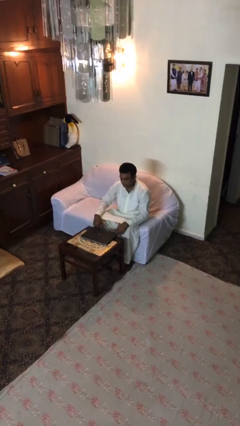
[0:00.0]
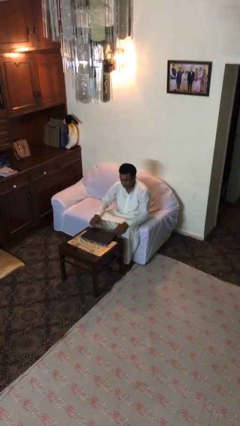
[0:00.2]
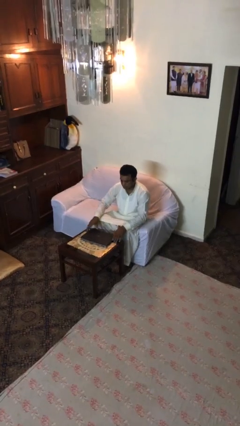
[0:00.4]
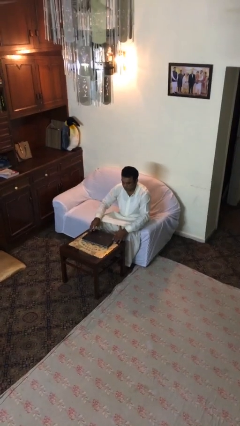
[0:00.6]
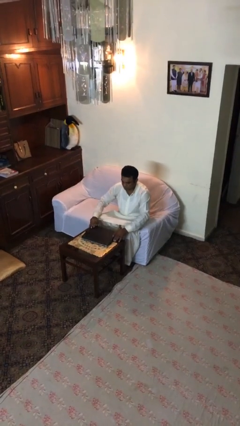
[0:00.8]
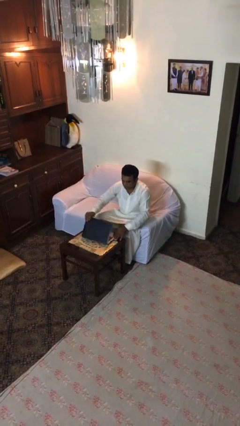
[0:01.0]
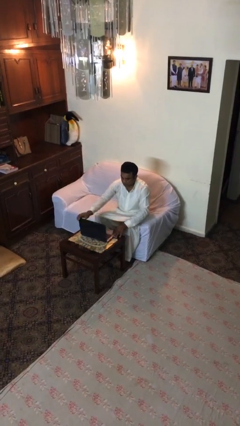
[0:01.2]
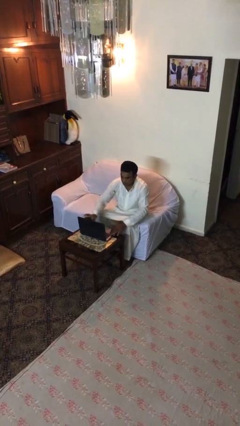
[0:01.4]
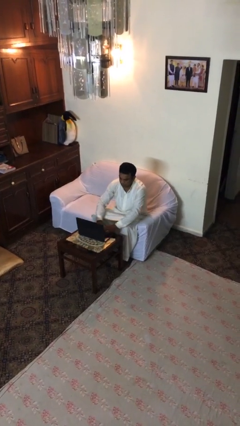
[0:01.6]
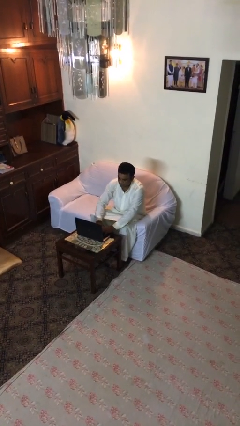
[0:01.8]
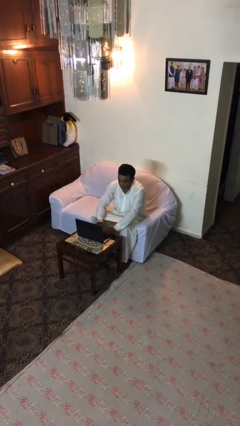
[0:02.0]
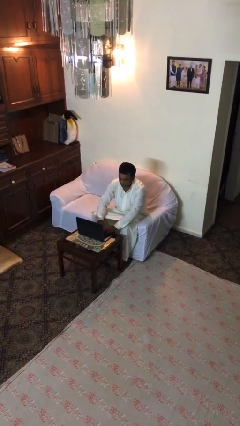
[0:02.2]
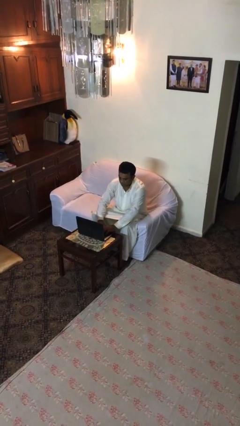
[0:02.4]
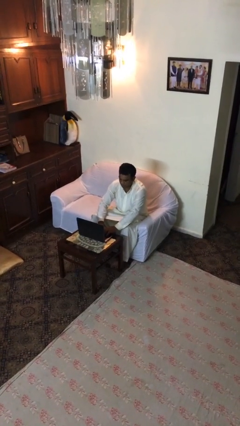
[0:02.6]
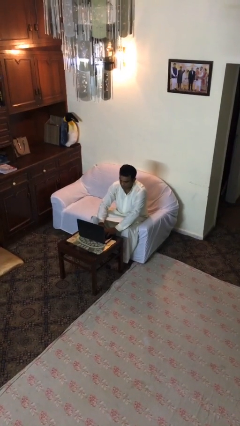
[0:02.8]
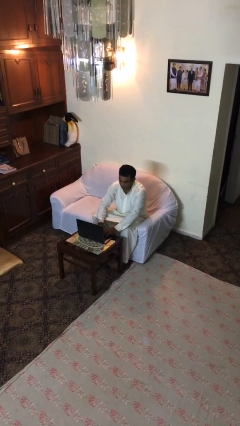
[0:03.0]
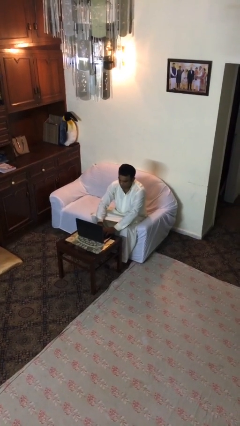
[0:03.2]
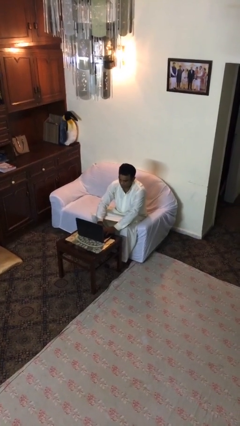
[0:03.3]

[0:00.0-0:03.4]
person interacts with laptop

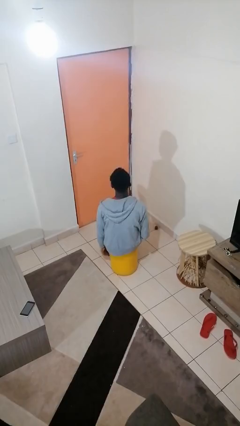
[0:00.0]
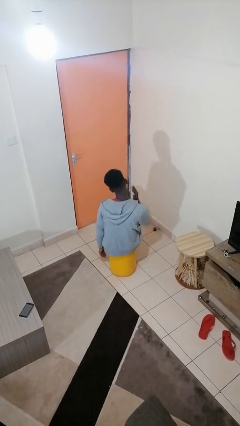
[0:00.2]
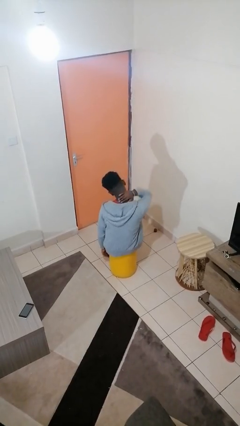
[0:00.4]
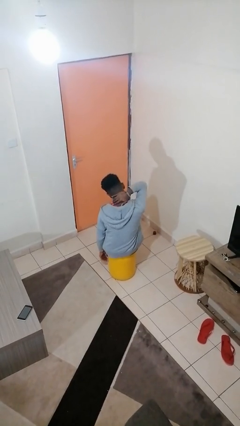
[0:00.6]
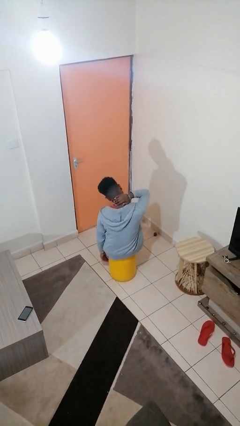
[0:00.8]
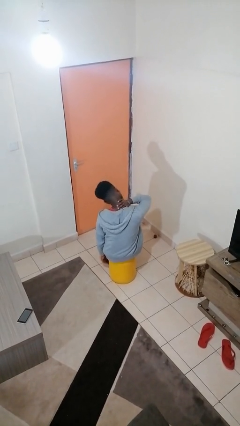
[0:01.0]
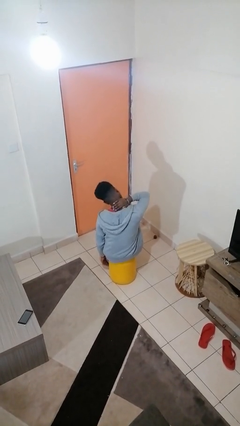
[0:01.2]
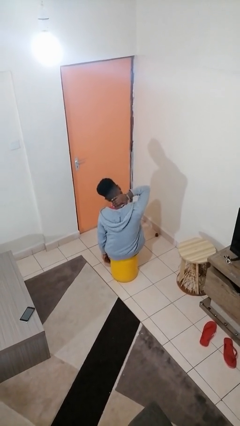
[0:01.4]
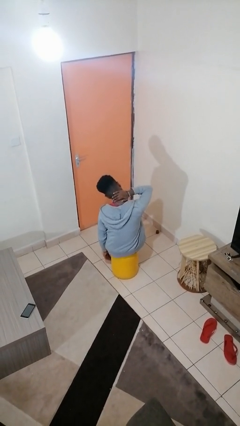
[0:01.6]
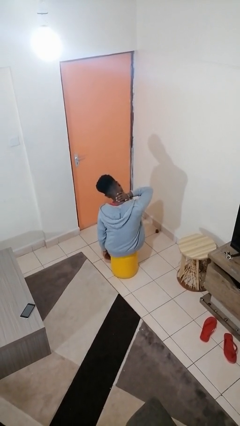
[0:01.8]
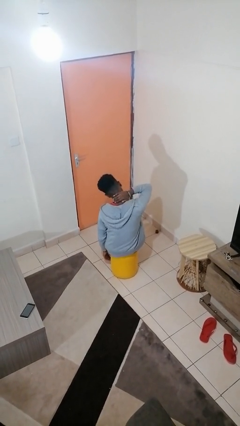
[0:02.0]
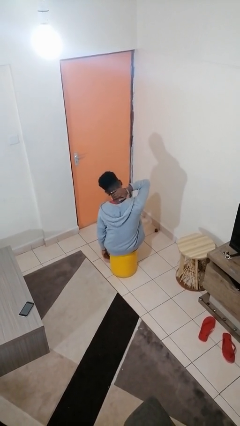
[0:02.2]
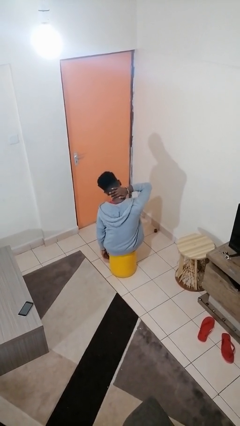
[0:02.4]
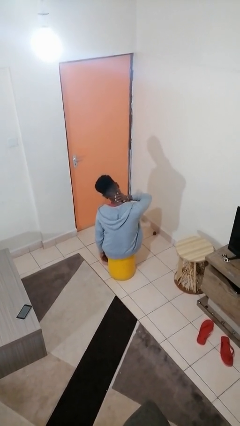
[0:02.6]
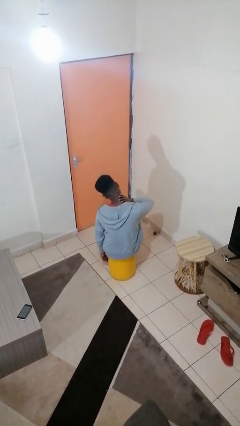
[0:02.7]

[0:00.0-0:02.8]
person rubs neck

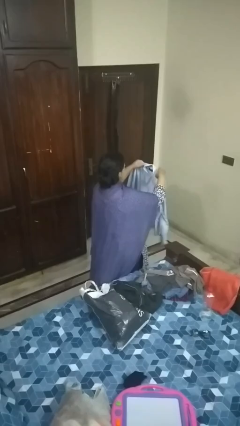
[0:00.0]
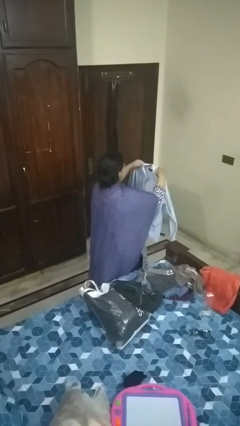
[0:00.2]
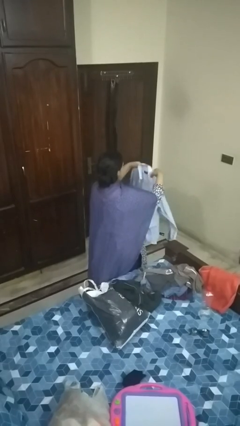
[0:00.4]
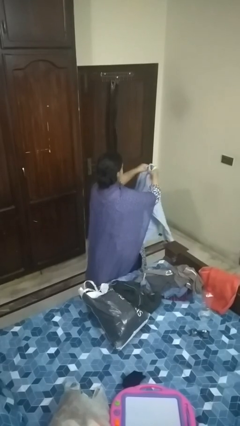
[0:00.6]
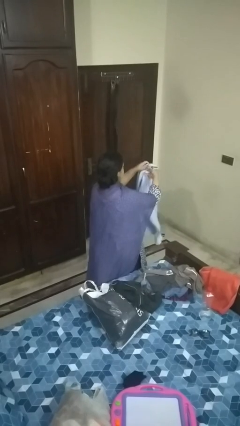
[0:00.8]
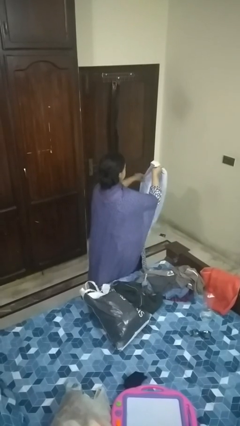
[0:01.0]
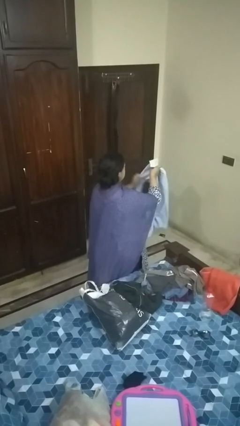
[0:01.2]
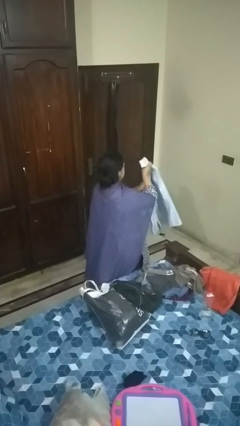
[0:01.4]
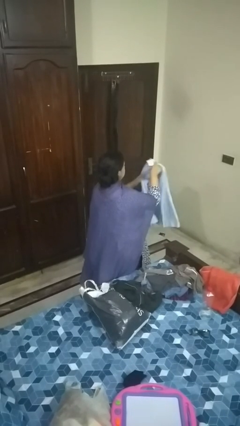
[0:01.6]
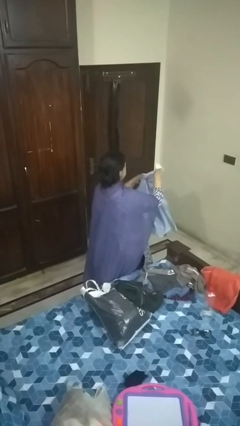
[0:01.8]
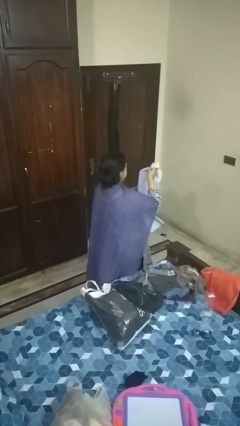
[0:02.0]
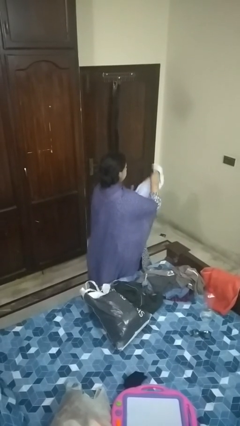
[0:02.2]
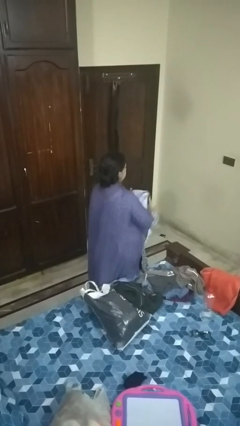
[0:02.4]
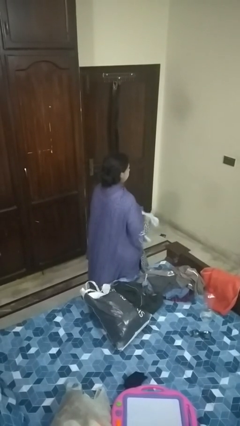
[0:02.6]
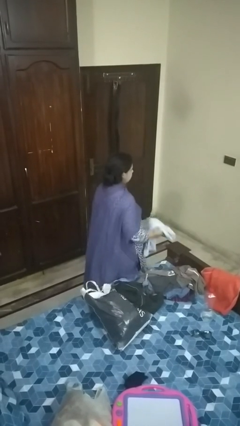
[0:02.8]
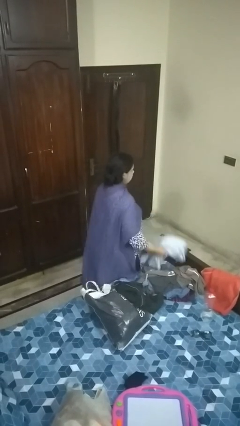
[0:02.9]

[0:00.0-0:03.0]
person folds shirt

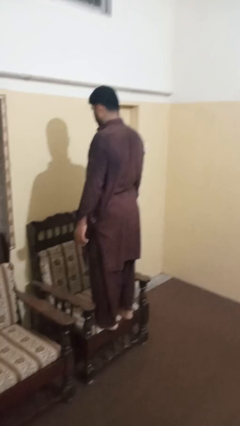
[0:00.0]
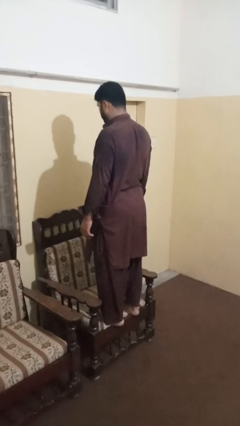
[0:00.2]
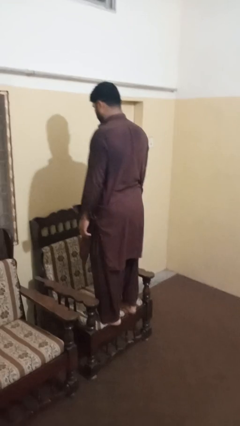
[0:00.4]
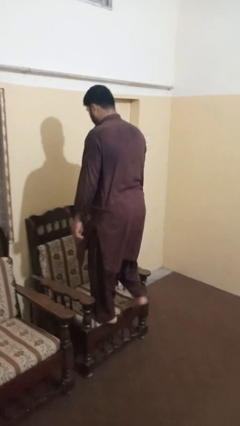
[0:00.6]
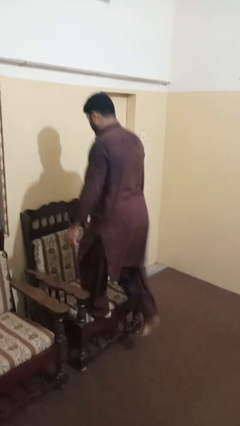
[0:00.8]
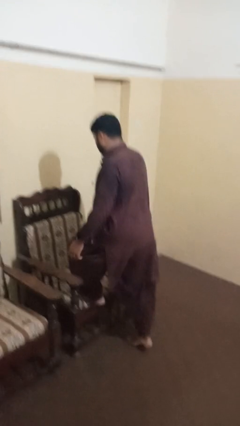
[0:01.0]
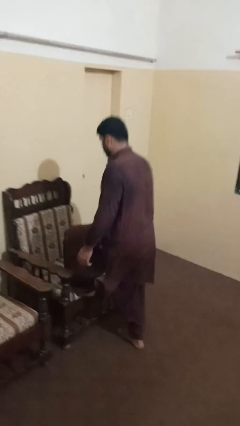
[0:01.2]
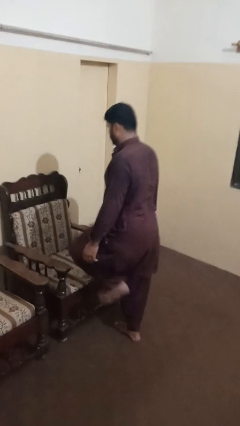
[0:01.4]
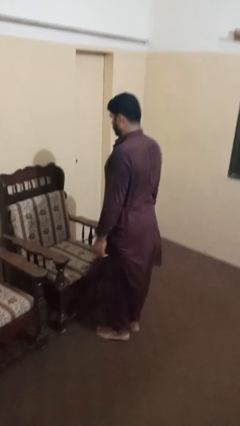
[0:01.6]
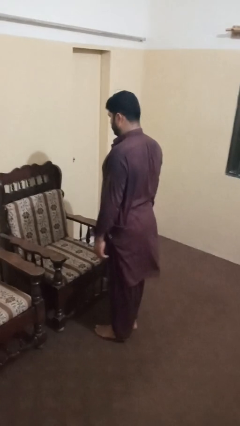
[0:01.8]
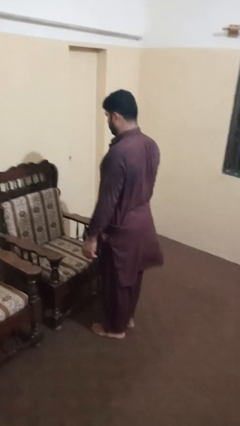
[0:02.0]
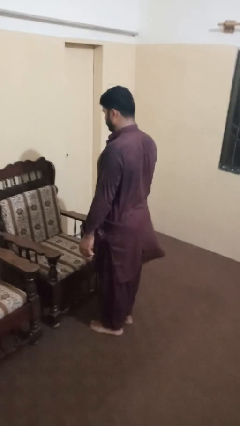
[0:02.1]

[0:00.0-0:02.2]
person climbs off chair

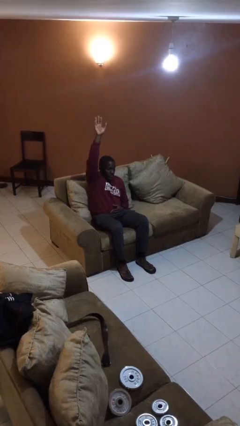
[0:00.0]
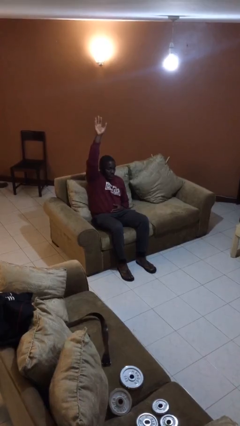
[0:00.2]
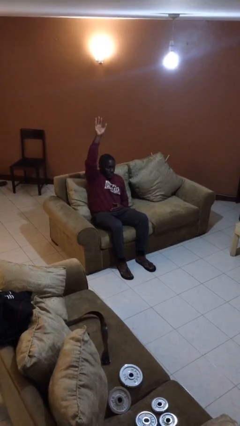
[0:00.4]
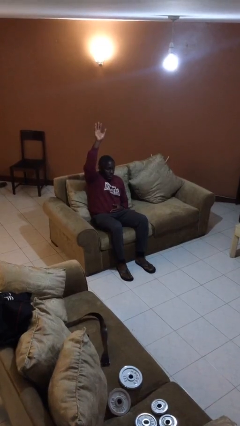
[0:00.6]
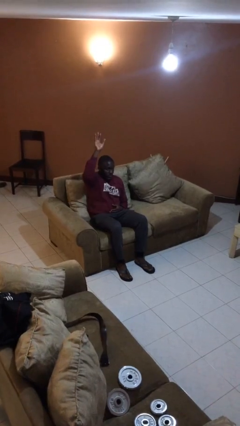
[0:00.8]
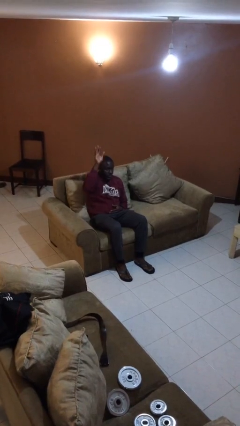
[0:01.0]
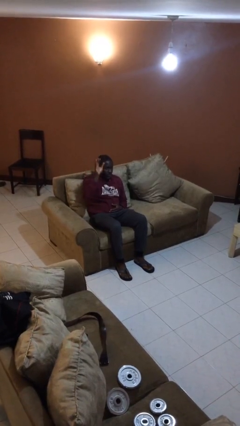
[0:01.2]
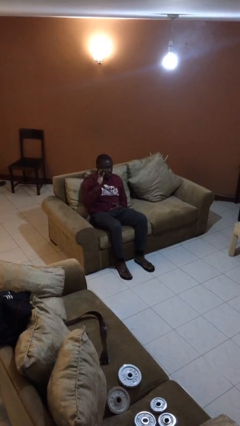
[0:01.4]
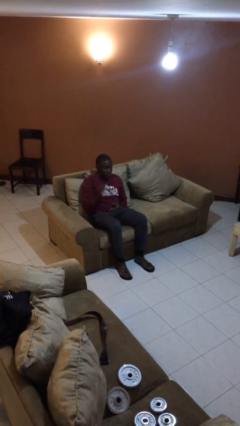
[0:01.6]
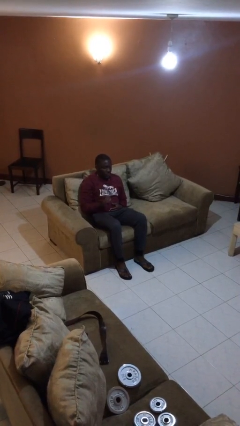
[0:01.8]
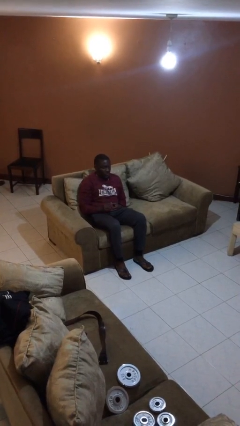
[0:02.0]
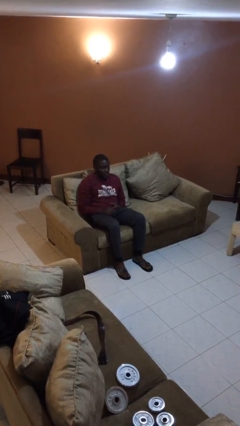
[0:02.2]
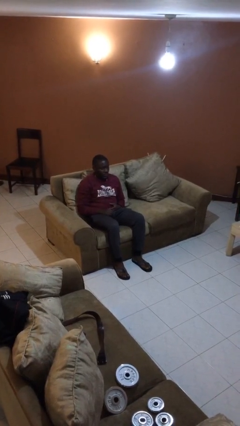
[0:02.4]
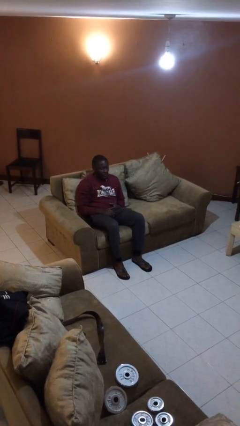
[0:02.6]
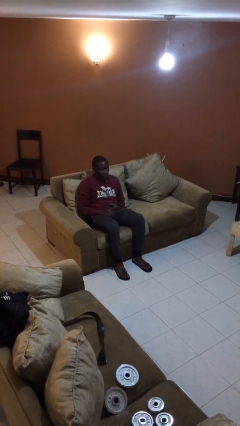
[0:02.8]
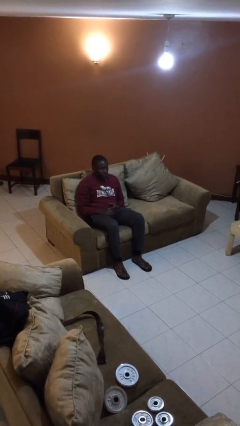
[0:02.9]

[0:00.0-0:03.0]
person gestures lower hand

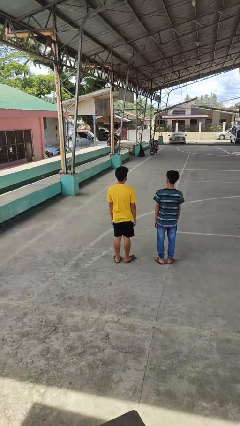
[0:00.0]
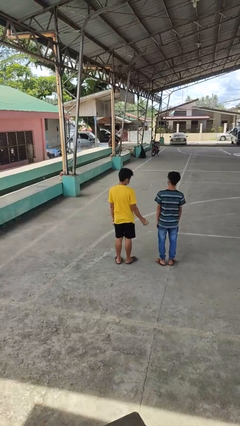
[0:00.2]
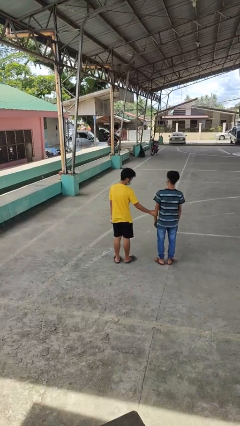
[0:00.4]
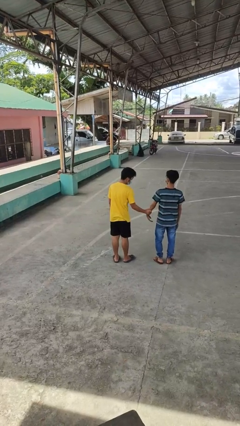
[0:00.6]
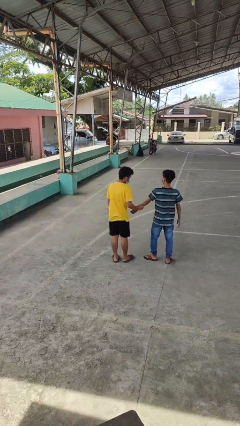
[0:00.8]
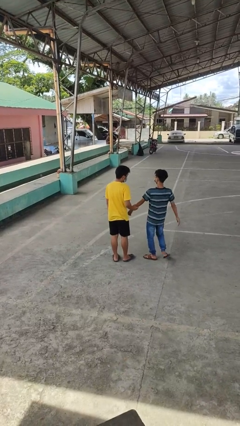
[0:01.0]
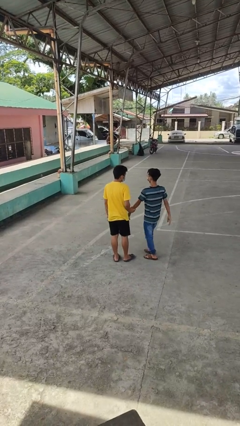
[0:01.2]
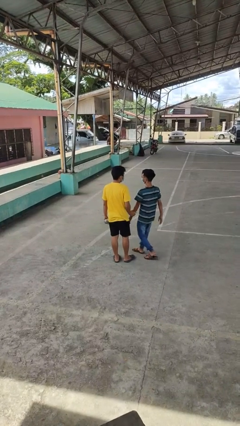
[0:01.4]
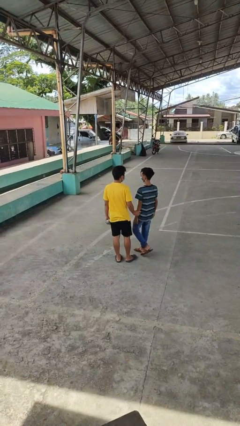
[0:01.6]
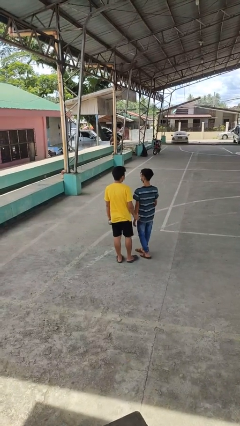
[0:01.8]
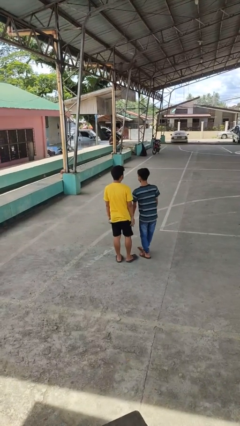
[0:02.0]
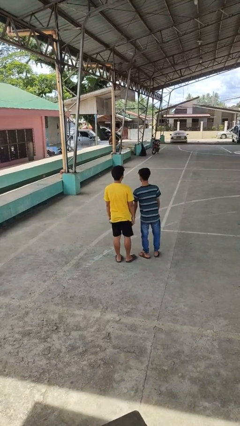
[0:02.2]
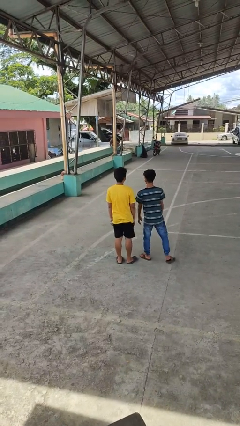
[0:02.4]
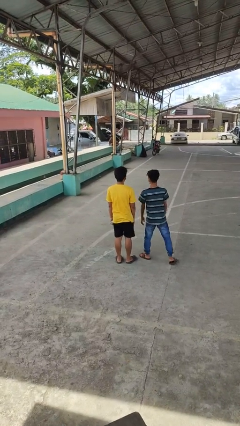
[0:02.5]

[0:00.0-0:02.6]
person grabs person by forearm

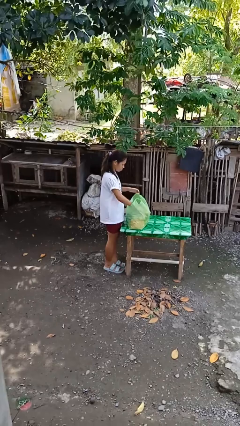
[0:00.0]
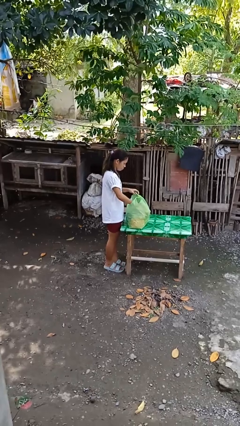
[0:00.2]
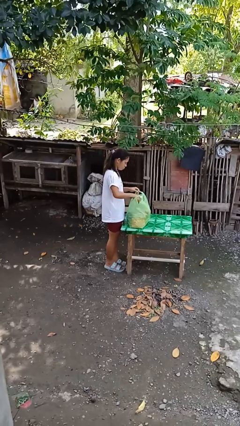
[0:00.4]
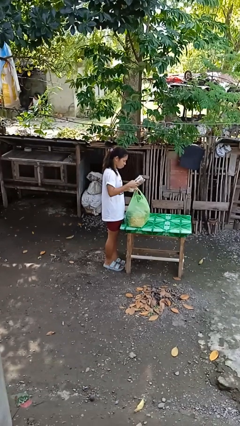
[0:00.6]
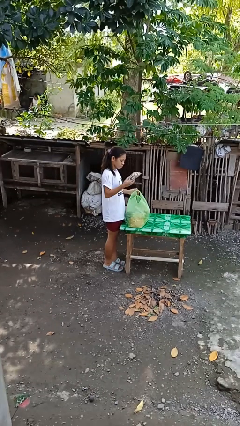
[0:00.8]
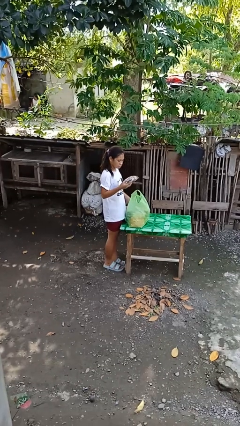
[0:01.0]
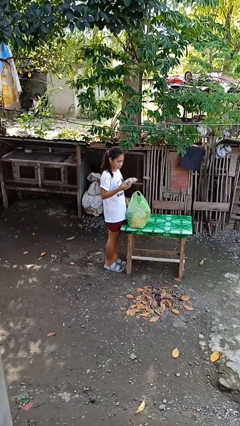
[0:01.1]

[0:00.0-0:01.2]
person hits person with pillow
